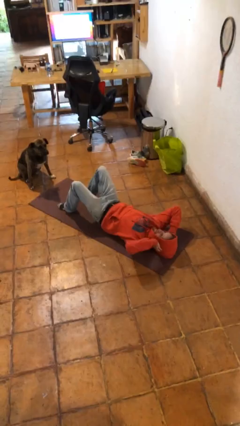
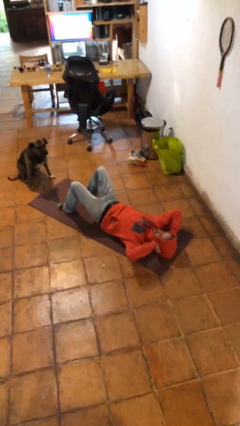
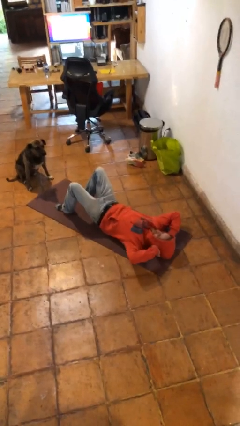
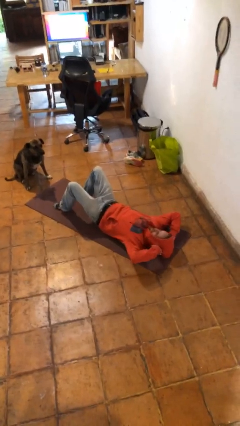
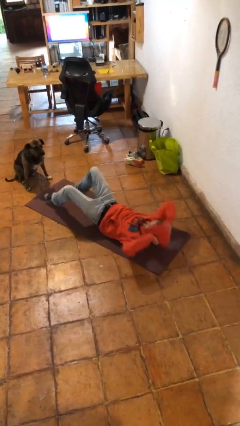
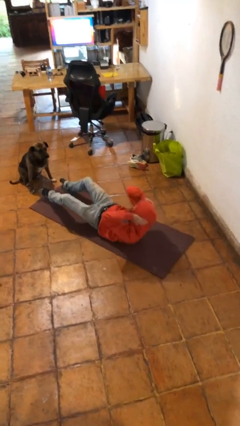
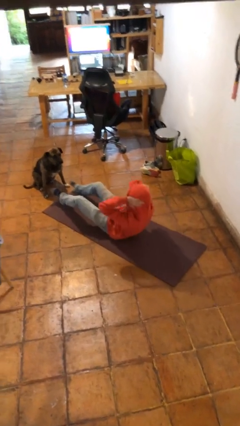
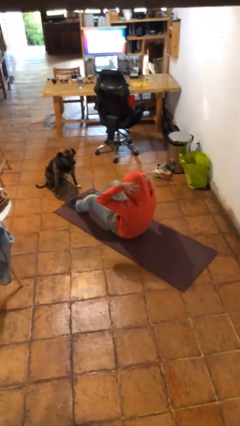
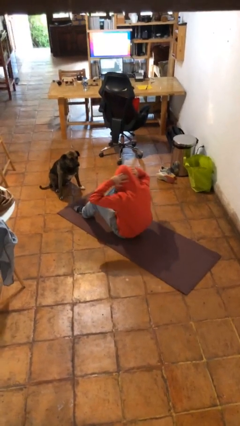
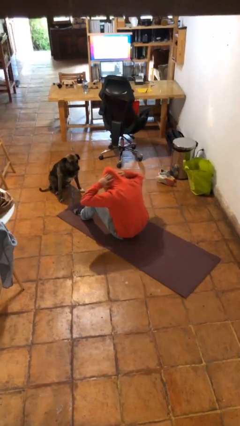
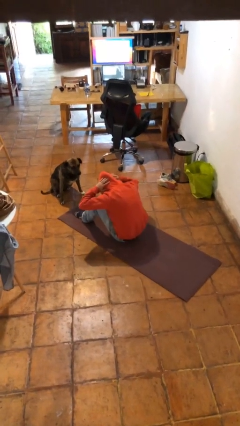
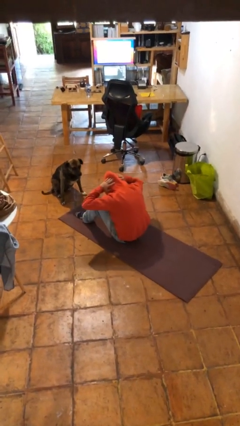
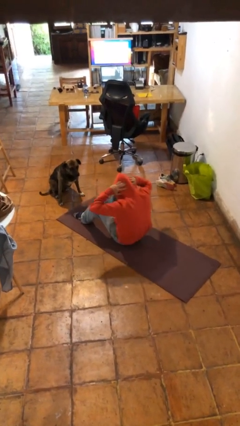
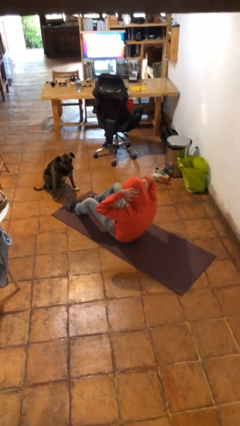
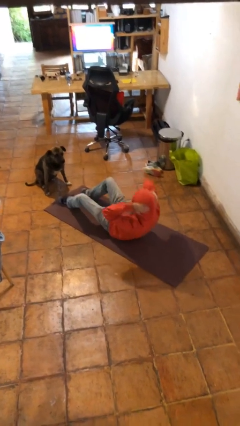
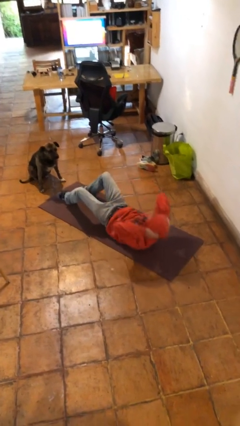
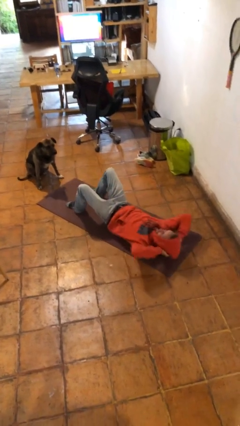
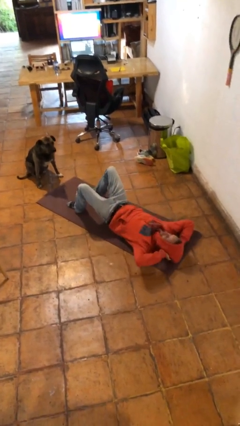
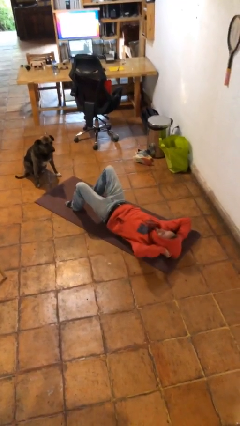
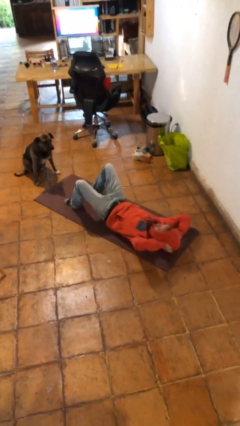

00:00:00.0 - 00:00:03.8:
person exercises with situp

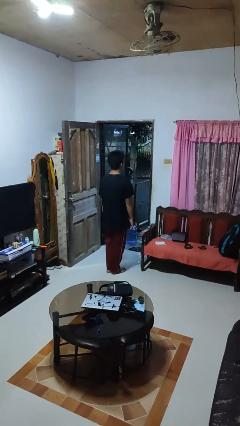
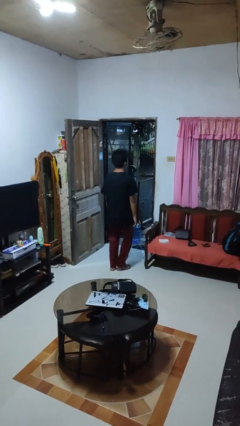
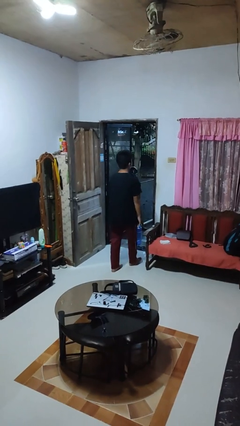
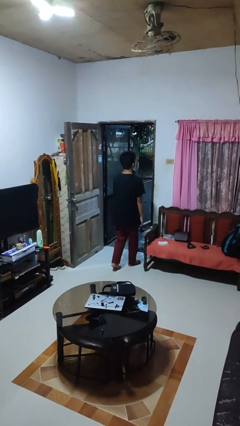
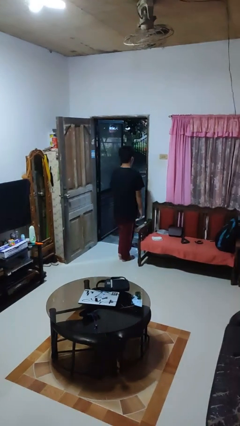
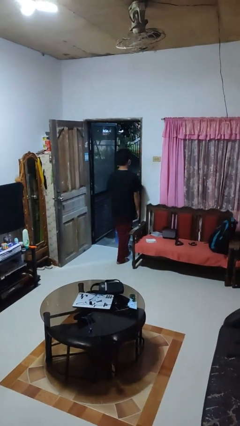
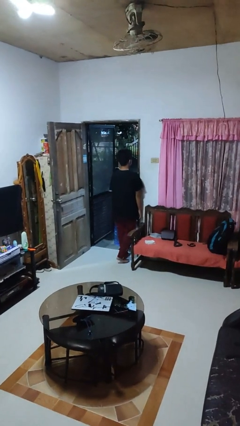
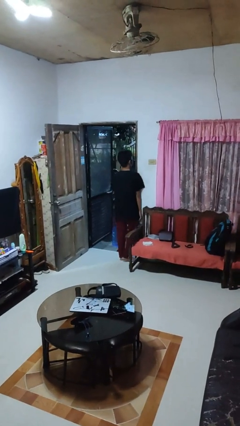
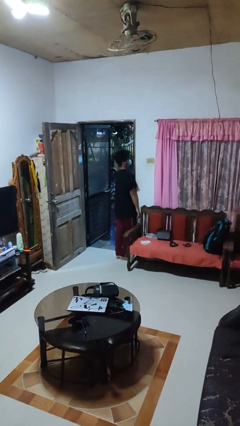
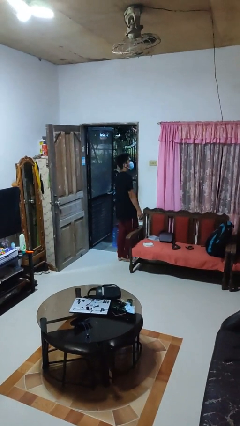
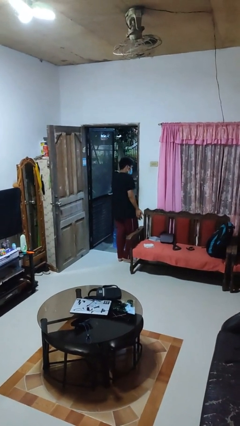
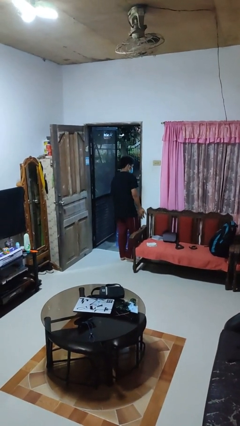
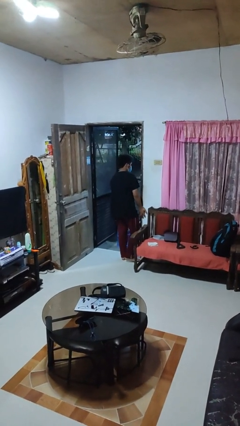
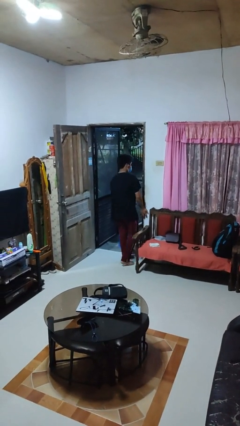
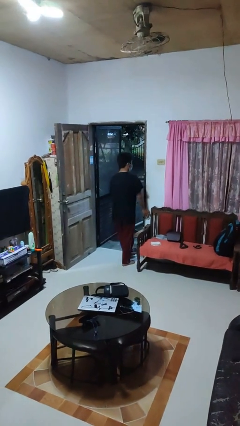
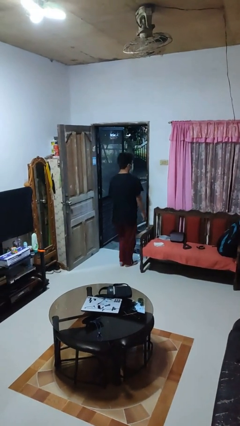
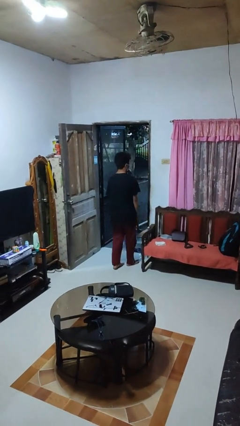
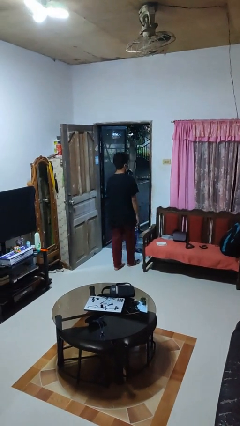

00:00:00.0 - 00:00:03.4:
person bumps into wall

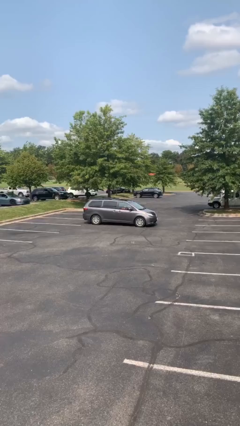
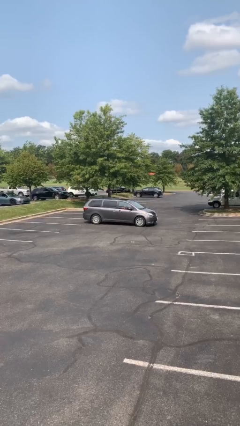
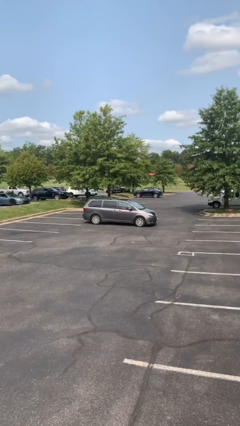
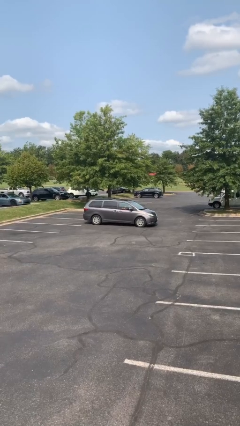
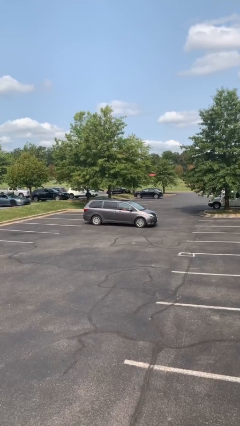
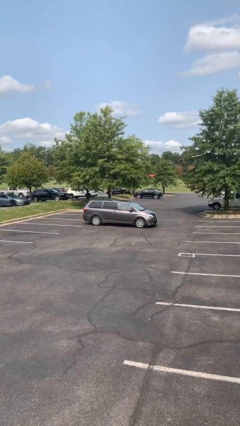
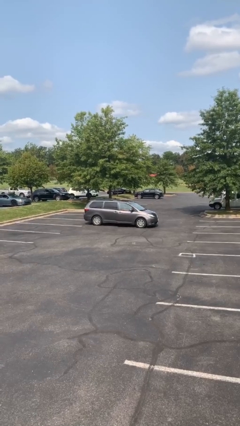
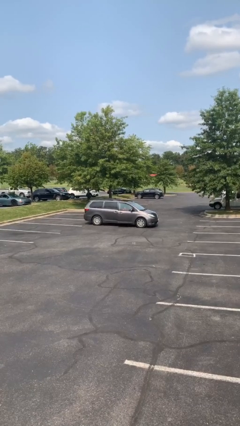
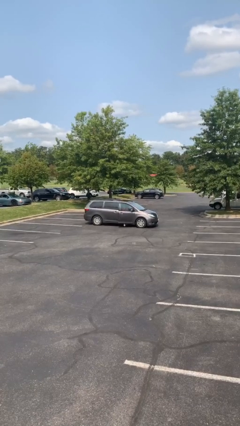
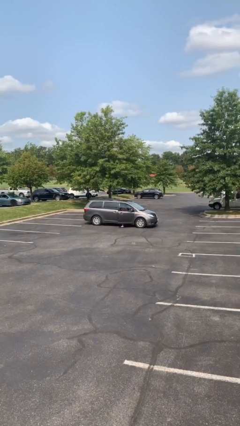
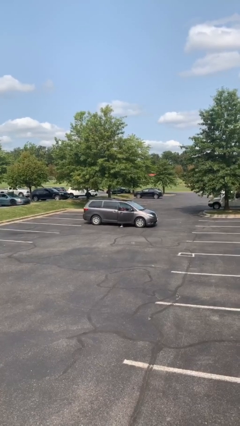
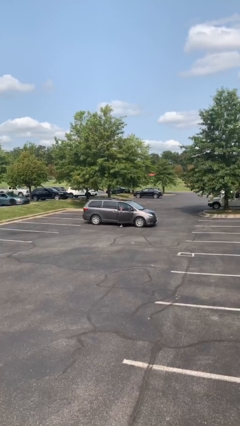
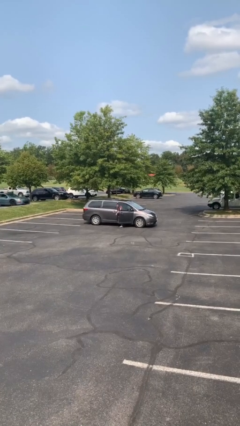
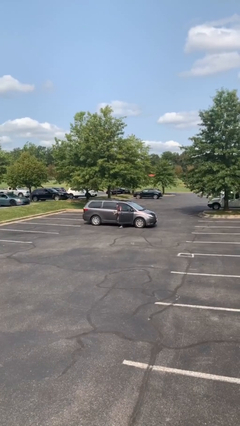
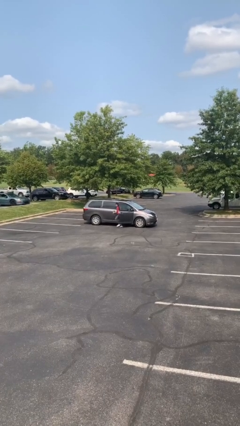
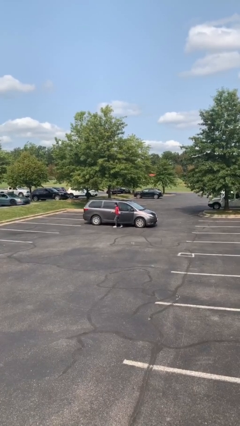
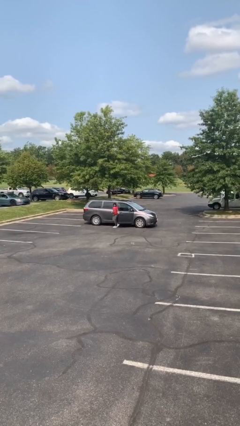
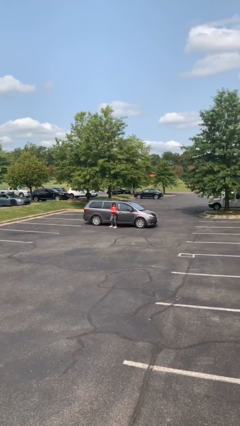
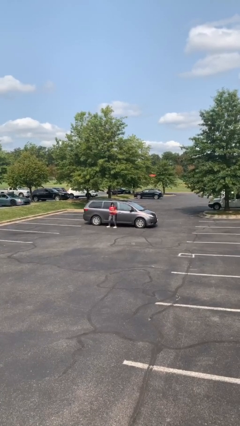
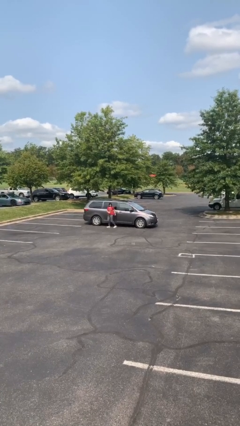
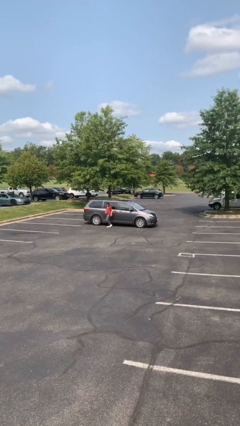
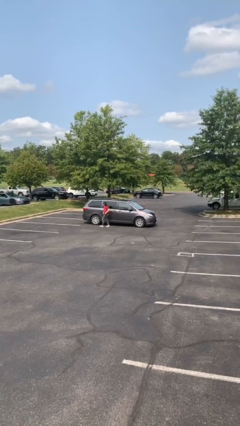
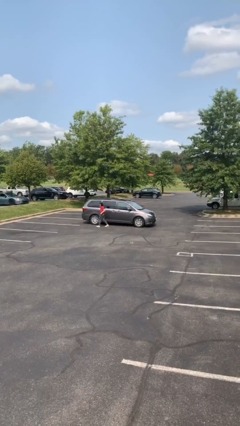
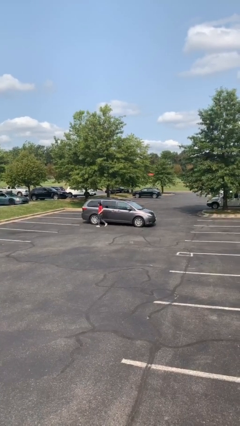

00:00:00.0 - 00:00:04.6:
car drops off person

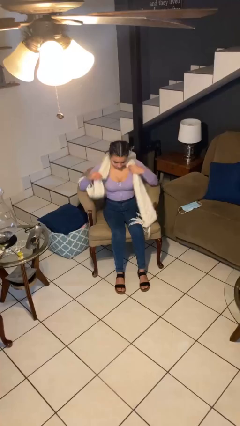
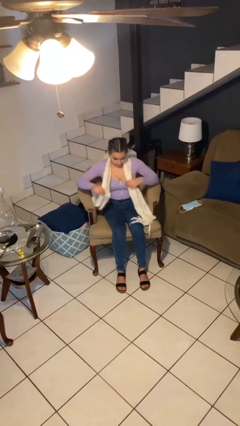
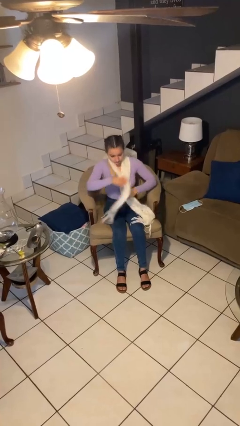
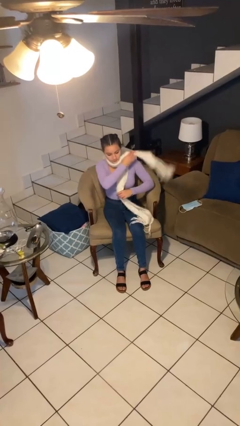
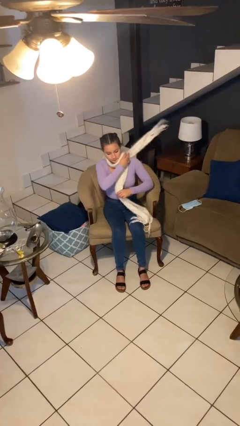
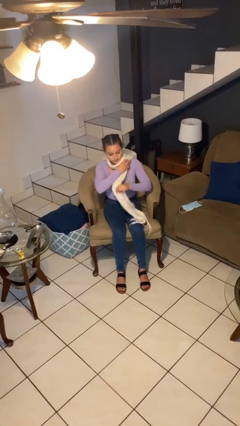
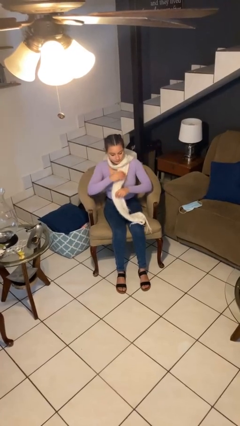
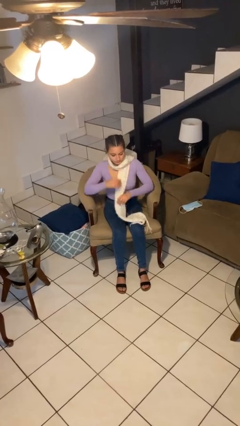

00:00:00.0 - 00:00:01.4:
person puts on scarf

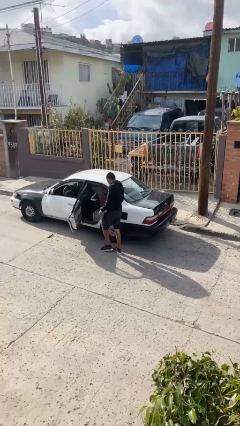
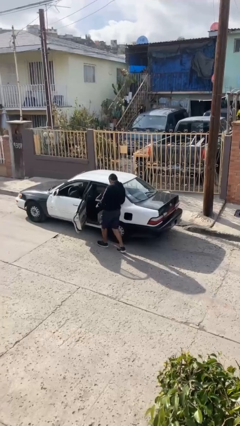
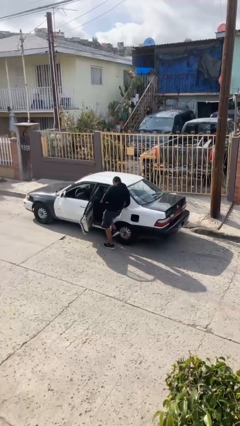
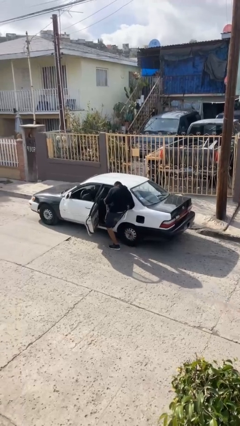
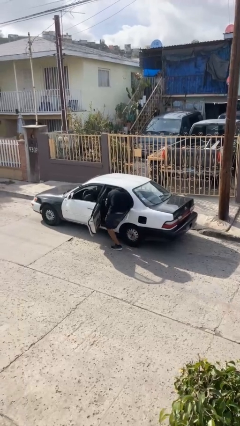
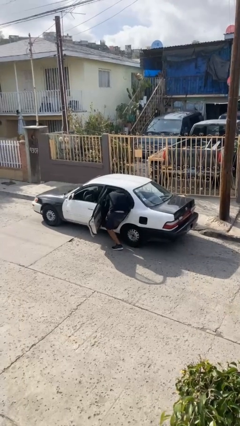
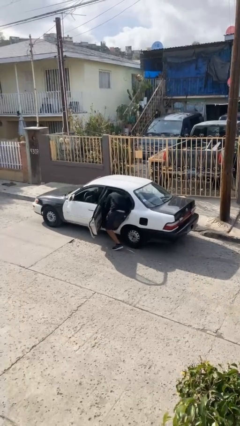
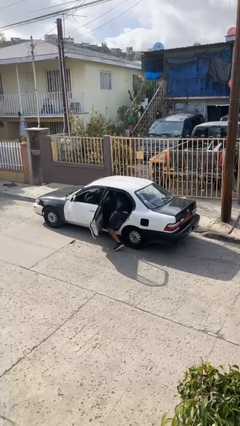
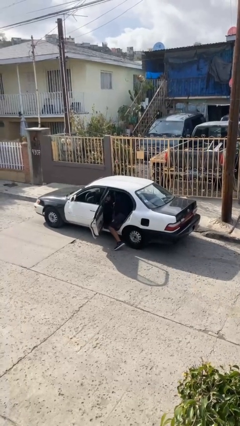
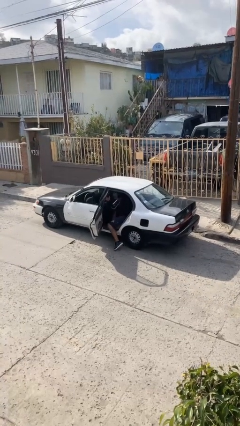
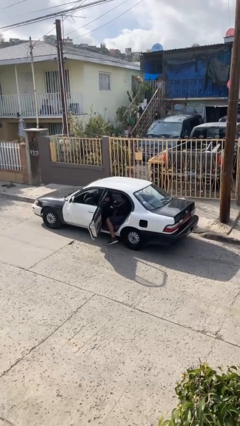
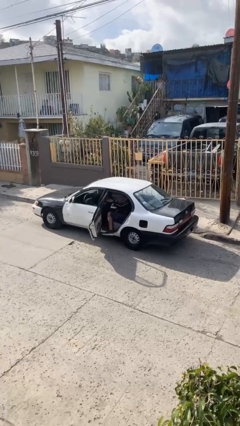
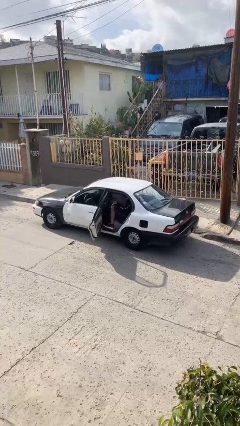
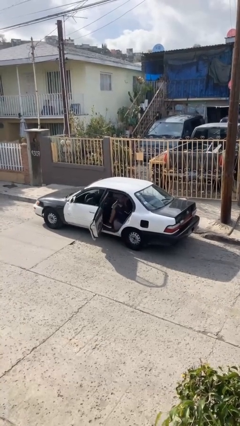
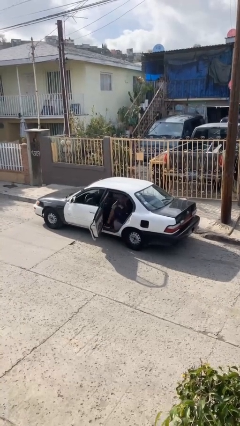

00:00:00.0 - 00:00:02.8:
person enters car

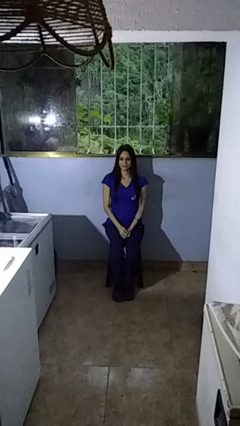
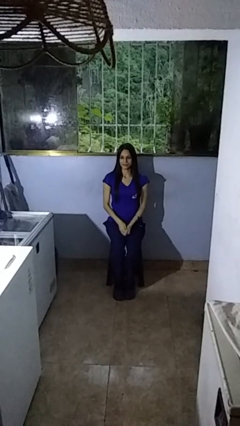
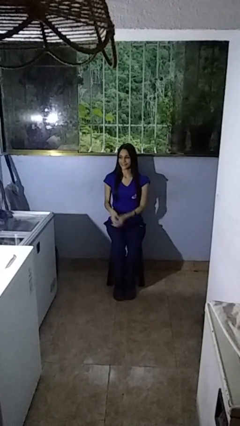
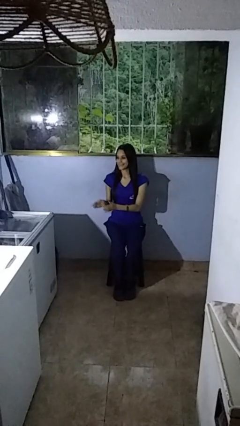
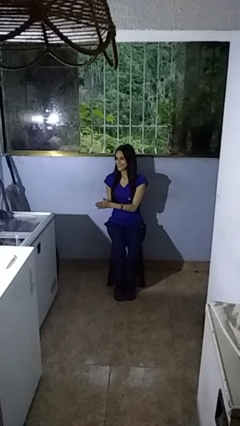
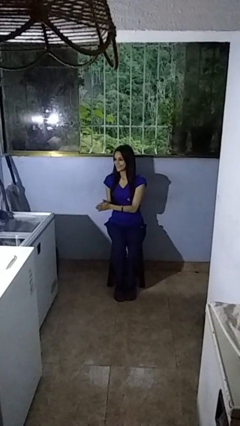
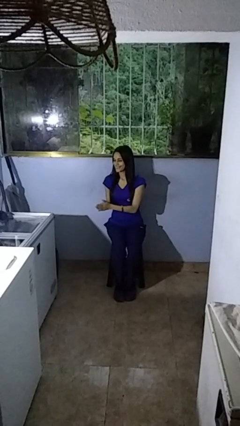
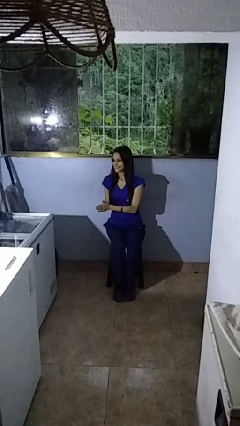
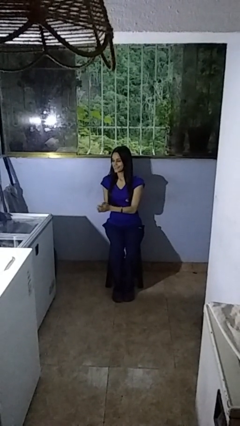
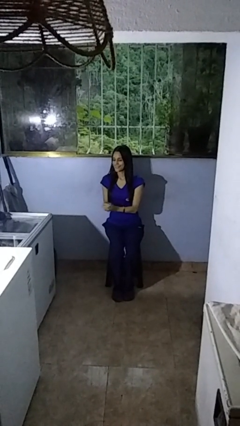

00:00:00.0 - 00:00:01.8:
person claps hands
